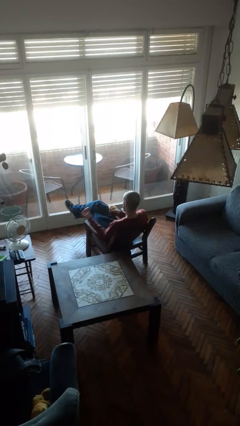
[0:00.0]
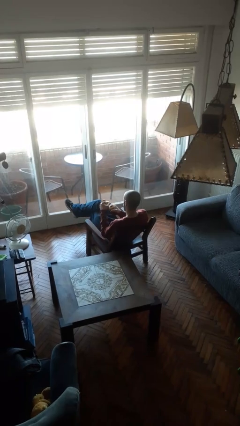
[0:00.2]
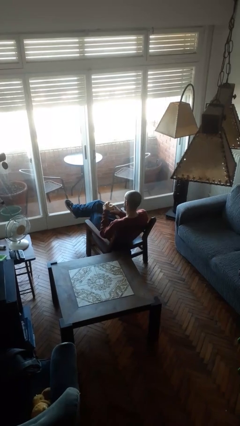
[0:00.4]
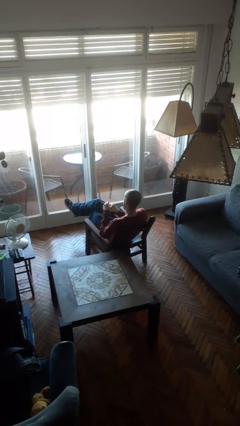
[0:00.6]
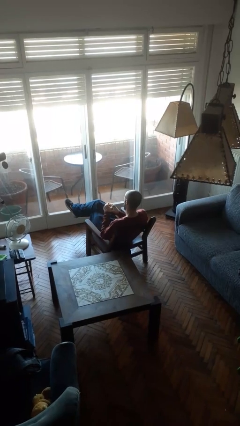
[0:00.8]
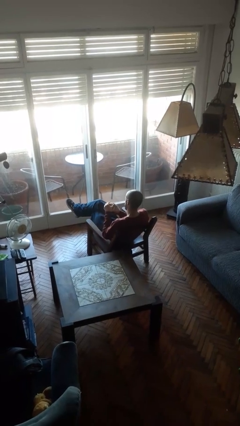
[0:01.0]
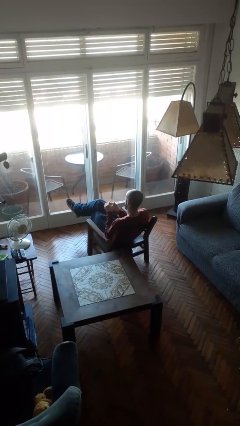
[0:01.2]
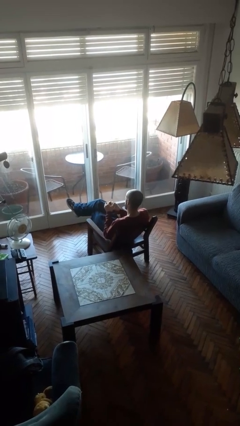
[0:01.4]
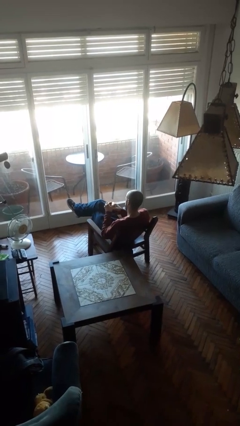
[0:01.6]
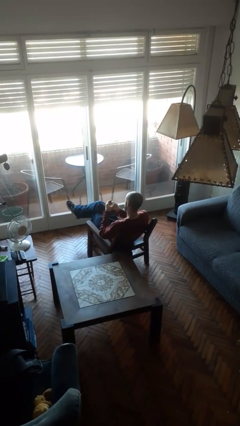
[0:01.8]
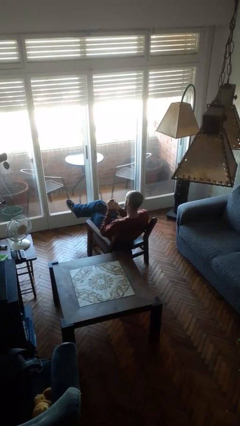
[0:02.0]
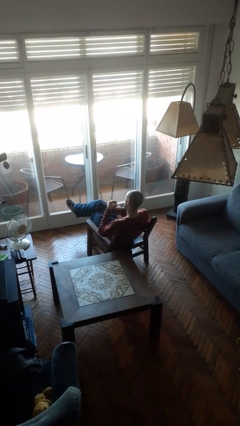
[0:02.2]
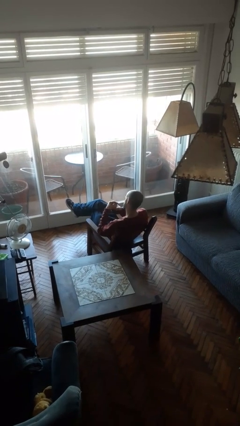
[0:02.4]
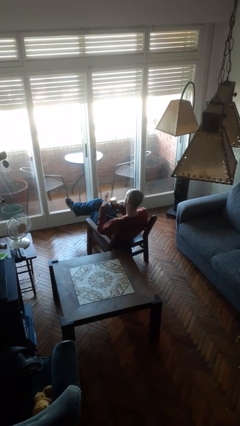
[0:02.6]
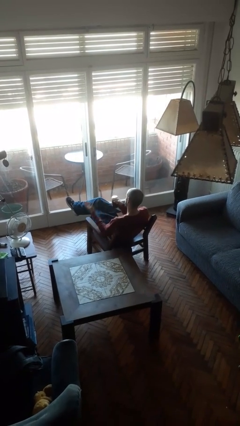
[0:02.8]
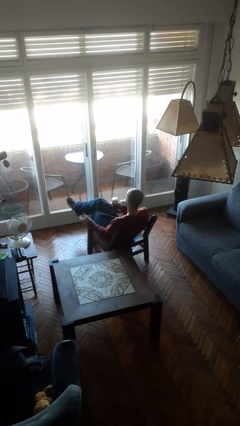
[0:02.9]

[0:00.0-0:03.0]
person closes jar

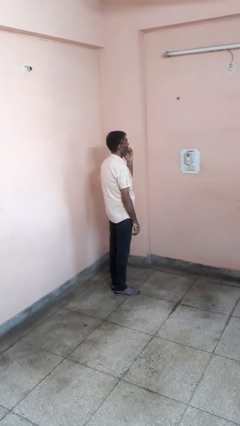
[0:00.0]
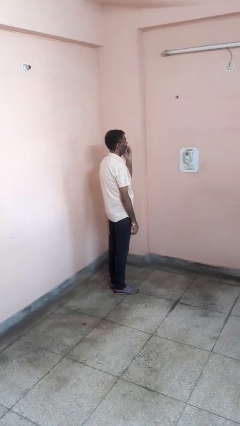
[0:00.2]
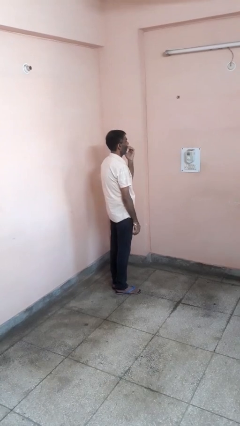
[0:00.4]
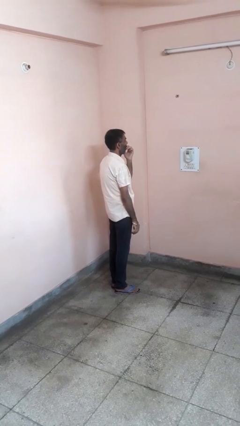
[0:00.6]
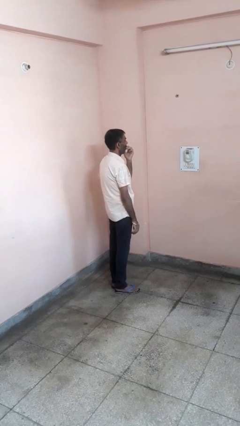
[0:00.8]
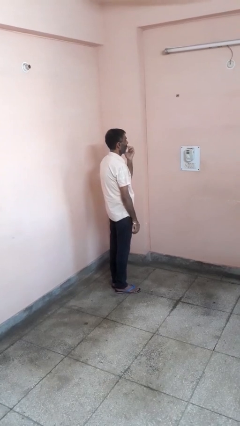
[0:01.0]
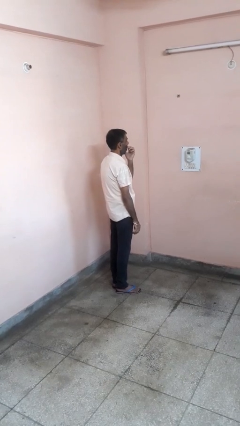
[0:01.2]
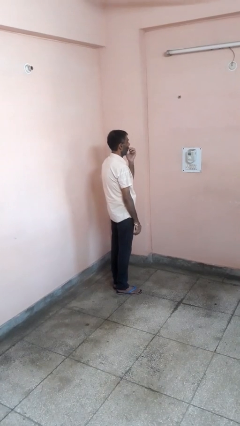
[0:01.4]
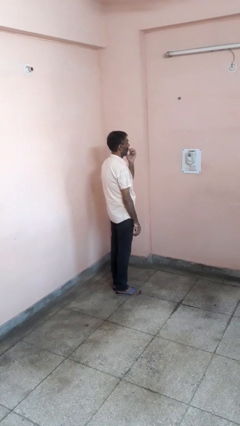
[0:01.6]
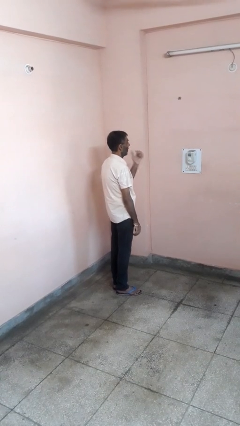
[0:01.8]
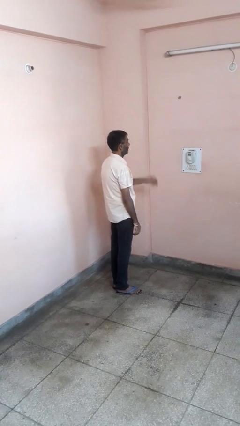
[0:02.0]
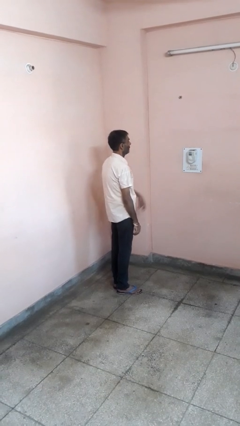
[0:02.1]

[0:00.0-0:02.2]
person licks fingers

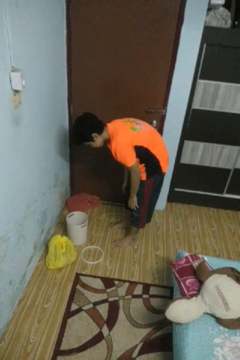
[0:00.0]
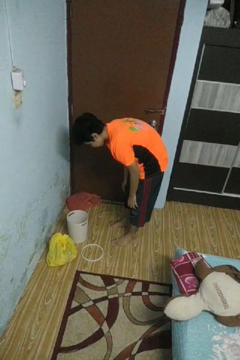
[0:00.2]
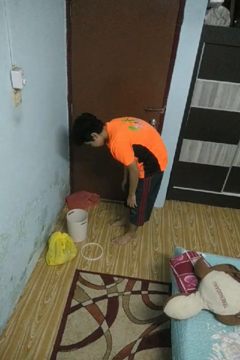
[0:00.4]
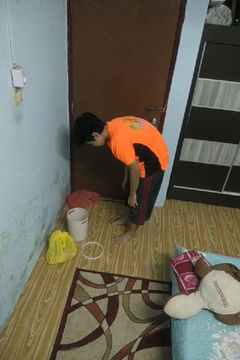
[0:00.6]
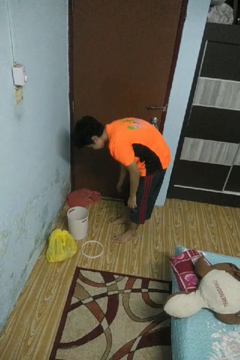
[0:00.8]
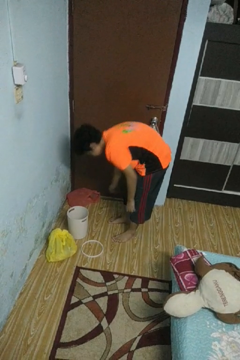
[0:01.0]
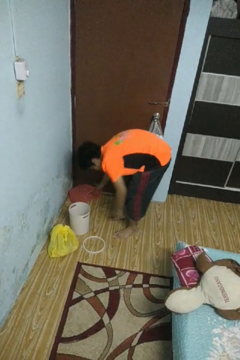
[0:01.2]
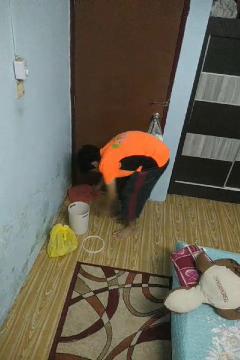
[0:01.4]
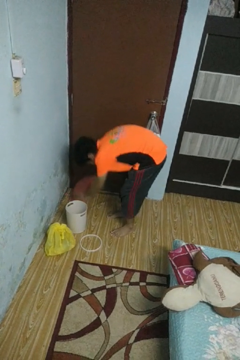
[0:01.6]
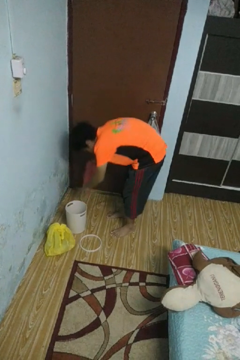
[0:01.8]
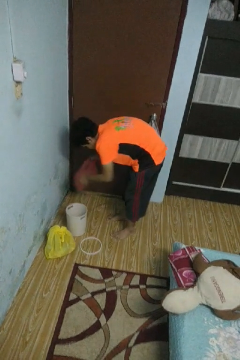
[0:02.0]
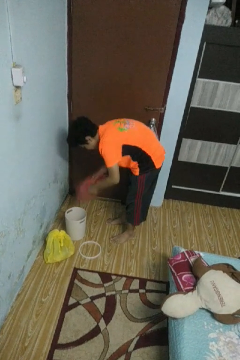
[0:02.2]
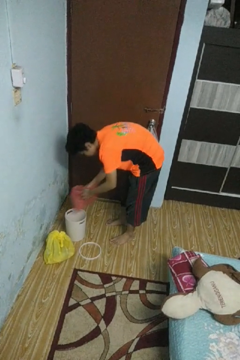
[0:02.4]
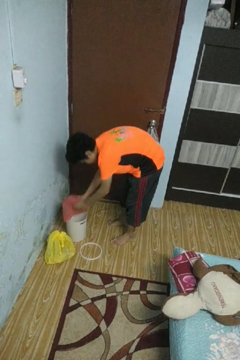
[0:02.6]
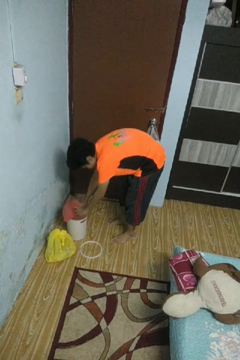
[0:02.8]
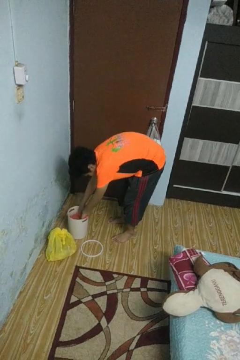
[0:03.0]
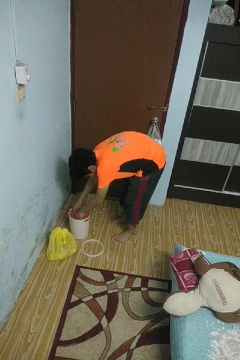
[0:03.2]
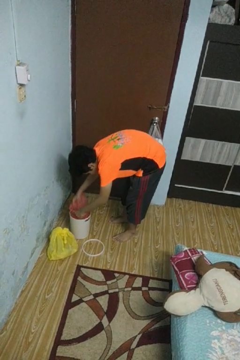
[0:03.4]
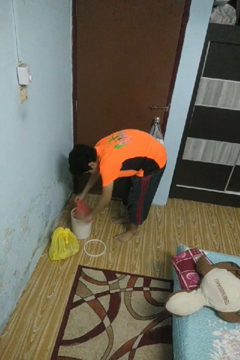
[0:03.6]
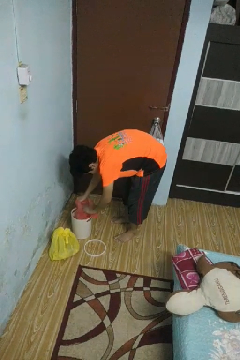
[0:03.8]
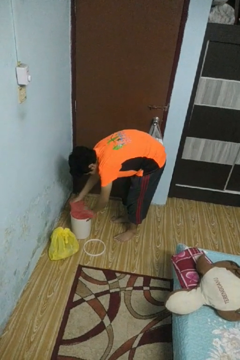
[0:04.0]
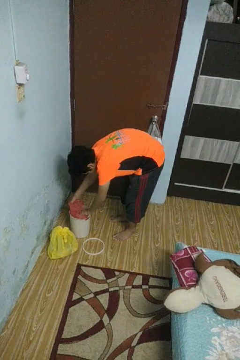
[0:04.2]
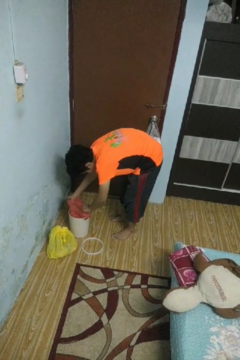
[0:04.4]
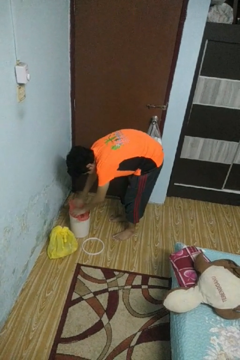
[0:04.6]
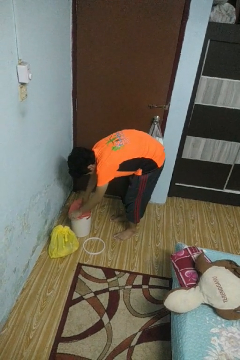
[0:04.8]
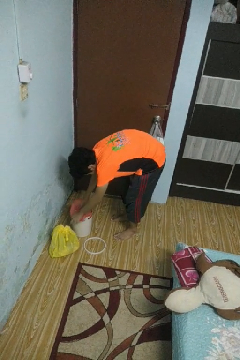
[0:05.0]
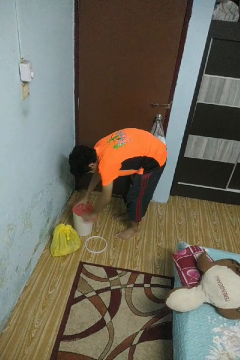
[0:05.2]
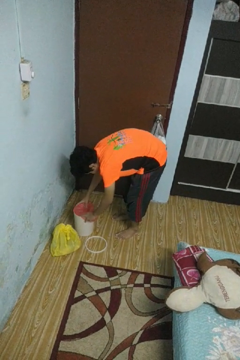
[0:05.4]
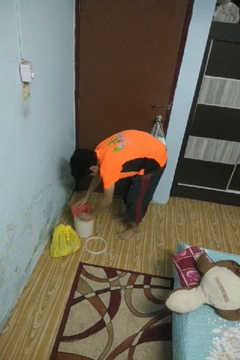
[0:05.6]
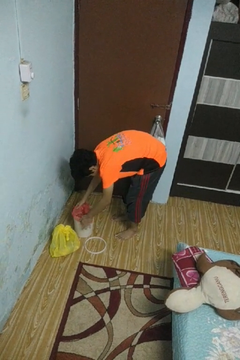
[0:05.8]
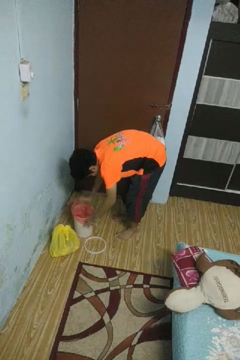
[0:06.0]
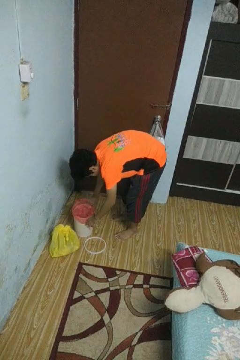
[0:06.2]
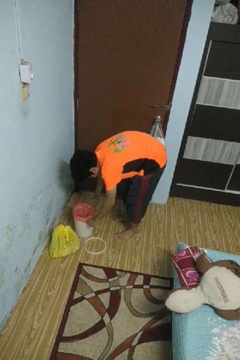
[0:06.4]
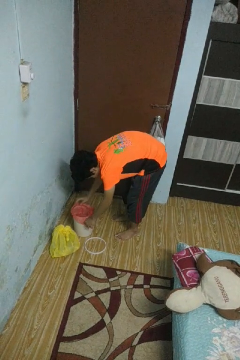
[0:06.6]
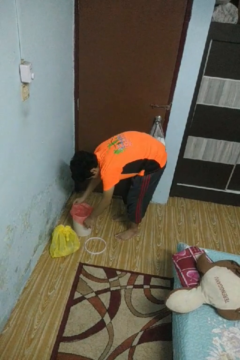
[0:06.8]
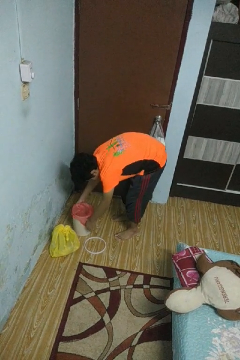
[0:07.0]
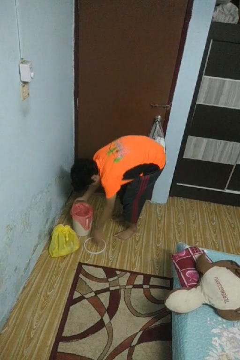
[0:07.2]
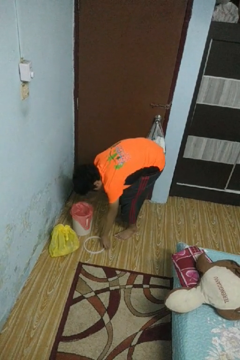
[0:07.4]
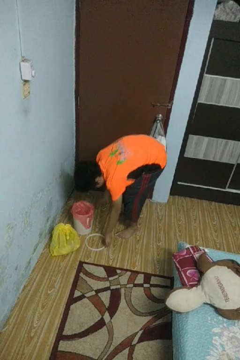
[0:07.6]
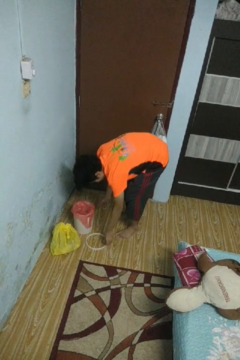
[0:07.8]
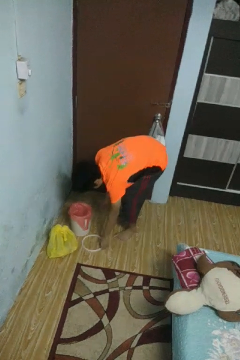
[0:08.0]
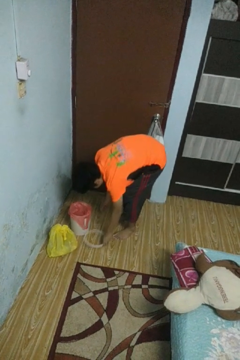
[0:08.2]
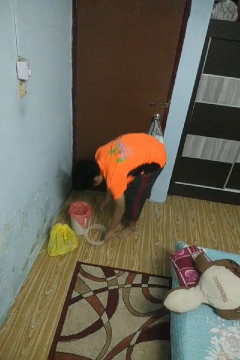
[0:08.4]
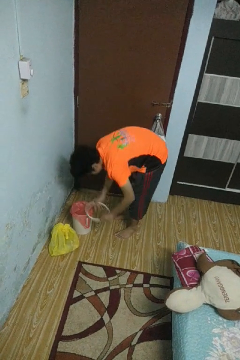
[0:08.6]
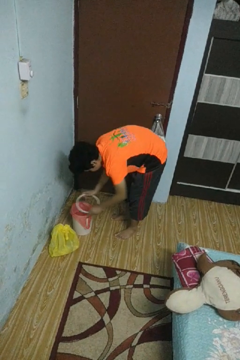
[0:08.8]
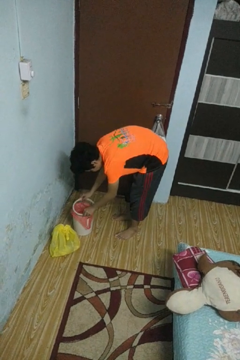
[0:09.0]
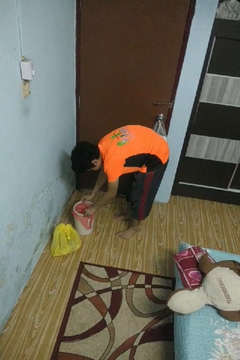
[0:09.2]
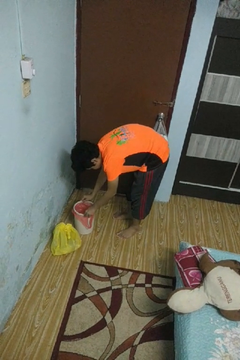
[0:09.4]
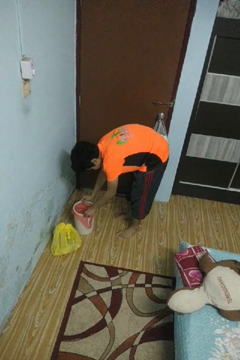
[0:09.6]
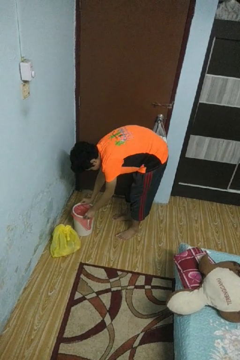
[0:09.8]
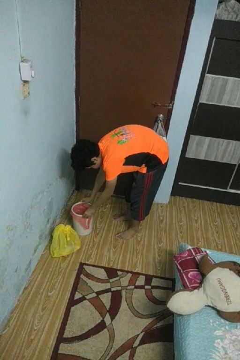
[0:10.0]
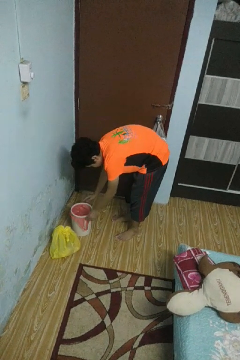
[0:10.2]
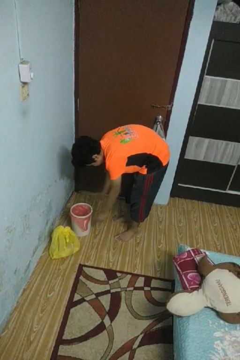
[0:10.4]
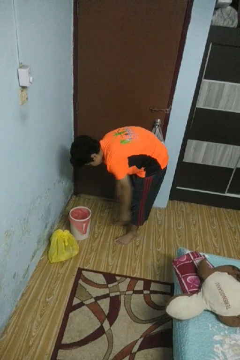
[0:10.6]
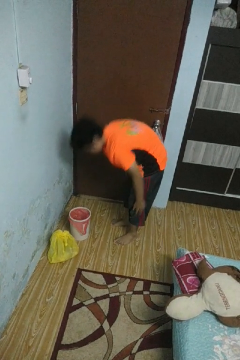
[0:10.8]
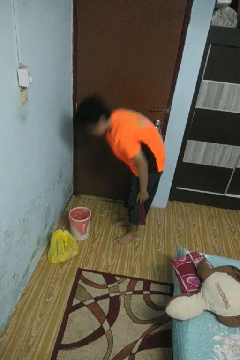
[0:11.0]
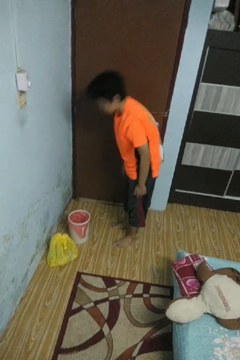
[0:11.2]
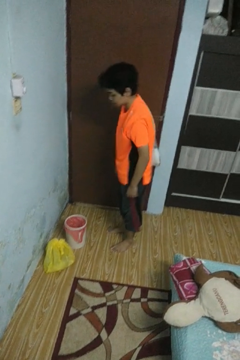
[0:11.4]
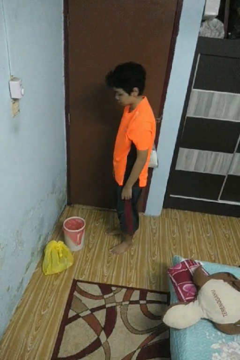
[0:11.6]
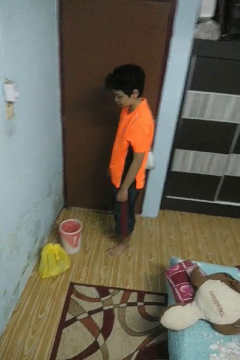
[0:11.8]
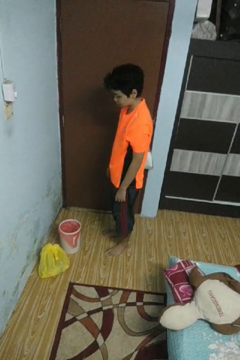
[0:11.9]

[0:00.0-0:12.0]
person inserts trashbag into trashcan

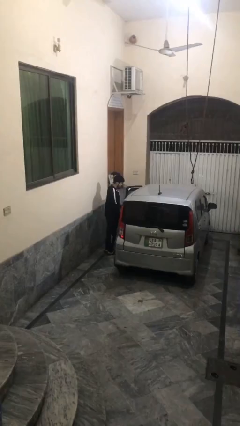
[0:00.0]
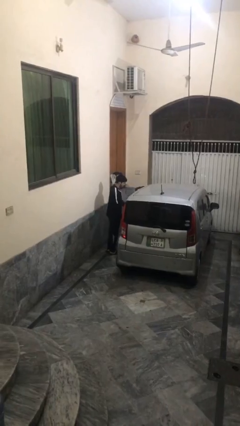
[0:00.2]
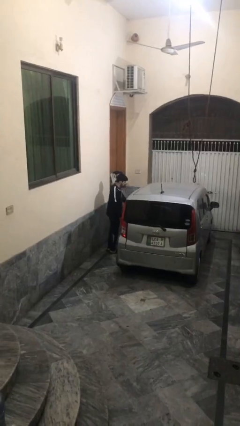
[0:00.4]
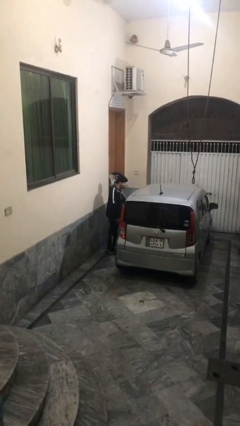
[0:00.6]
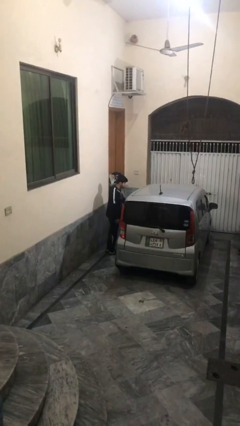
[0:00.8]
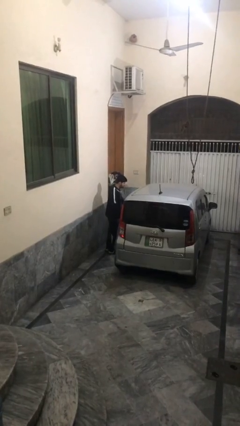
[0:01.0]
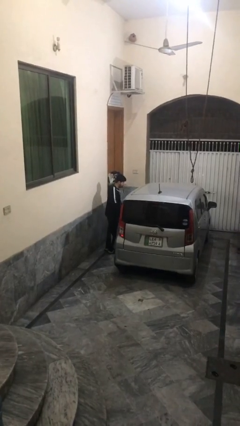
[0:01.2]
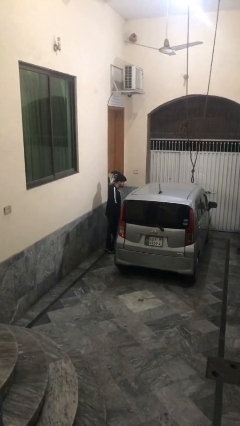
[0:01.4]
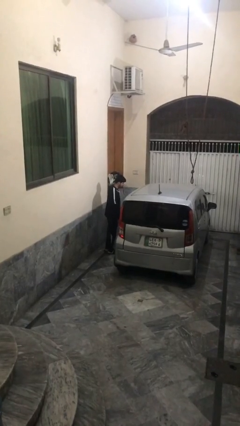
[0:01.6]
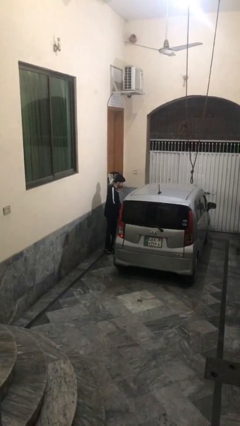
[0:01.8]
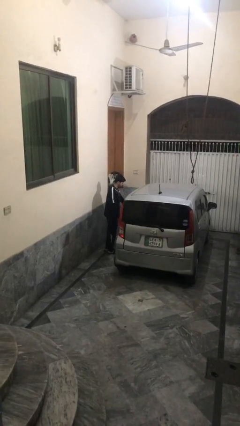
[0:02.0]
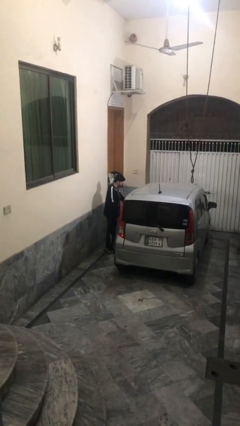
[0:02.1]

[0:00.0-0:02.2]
person closes car door

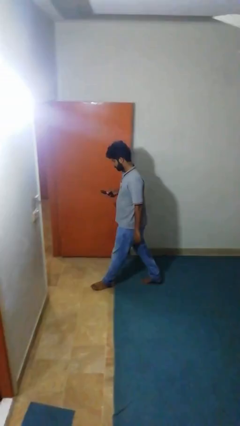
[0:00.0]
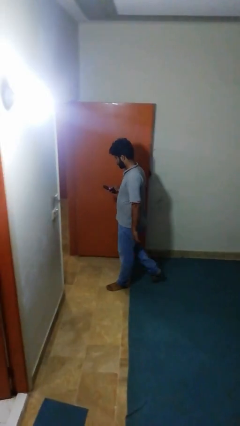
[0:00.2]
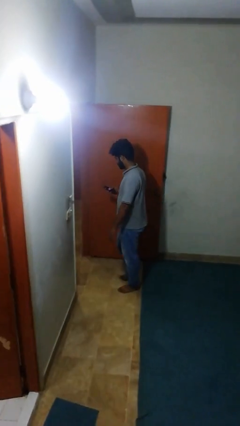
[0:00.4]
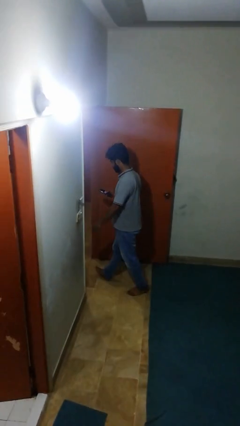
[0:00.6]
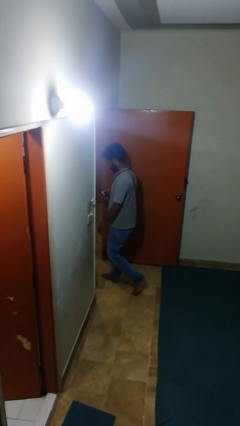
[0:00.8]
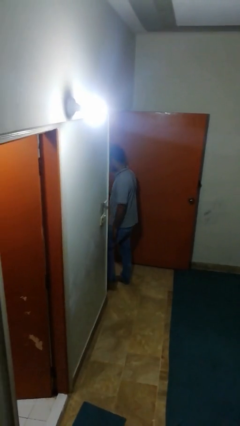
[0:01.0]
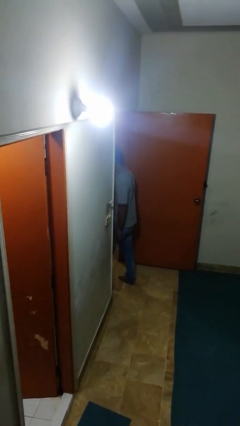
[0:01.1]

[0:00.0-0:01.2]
person exits scene through structure
